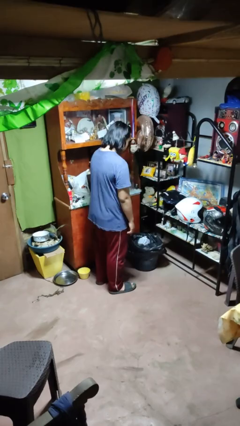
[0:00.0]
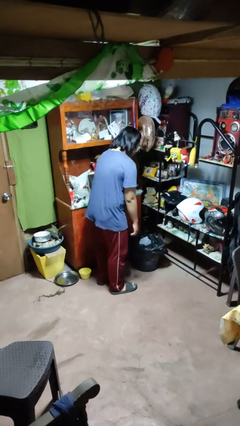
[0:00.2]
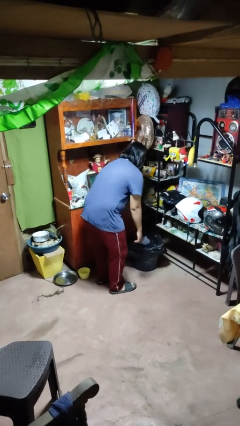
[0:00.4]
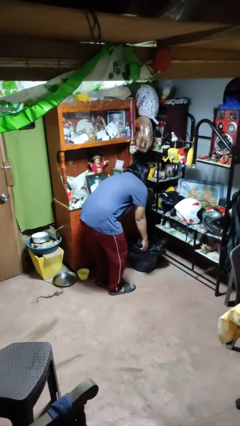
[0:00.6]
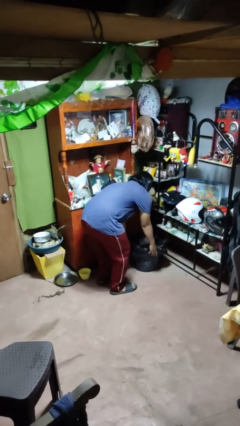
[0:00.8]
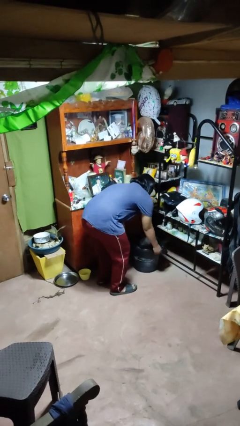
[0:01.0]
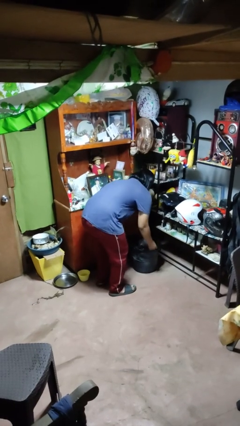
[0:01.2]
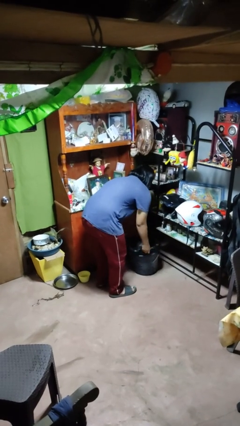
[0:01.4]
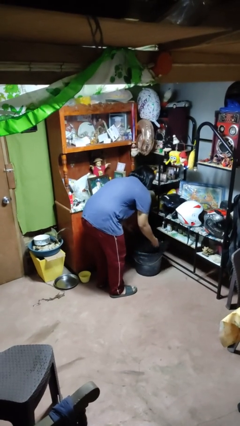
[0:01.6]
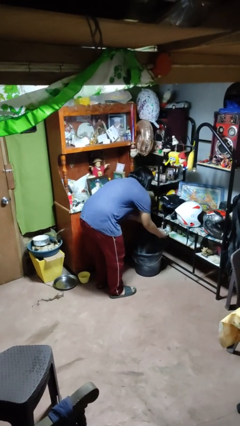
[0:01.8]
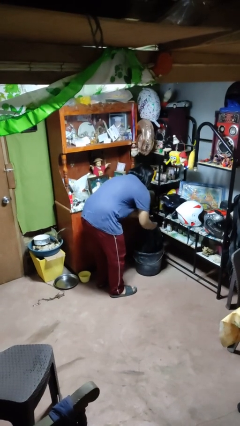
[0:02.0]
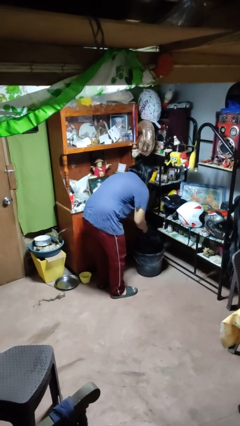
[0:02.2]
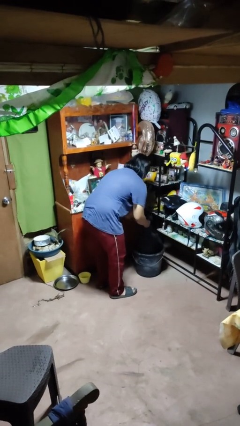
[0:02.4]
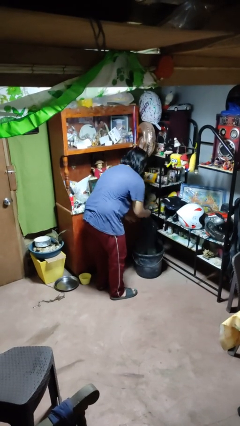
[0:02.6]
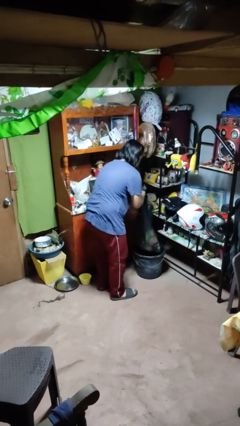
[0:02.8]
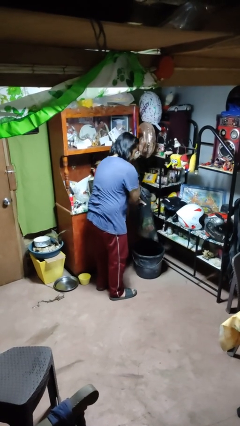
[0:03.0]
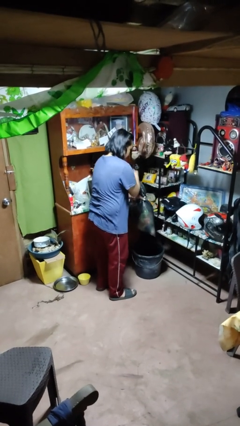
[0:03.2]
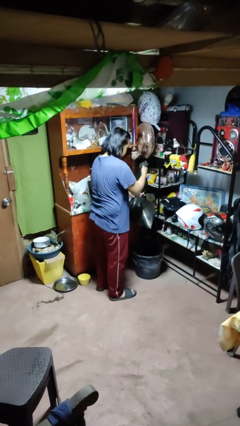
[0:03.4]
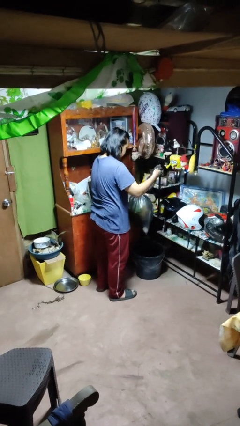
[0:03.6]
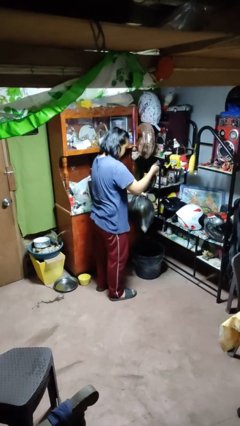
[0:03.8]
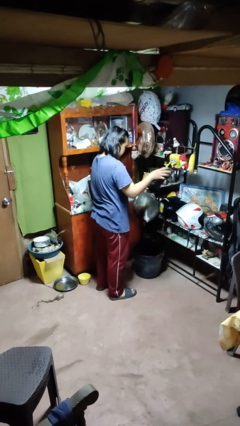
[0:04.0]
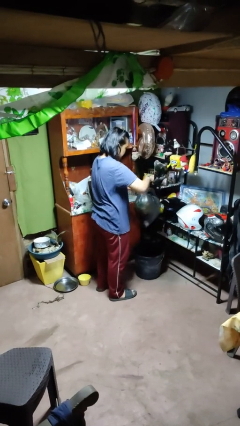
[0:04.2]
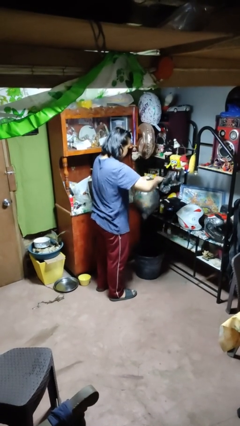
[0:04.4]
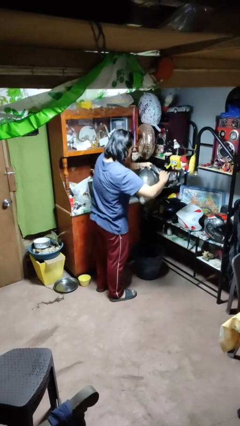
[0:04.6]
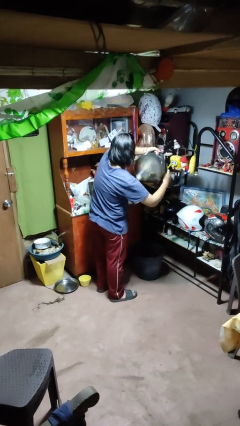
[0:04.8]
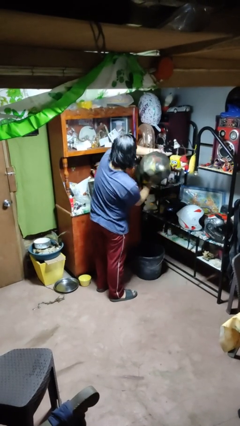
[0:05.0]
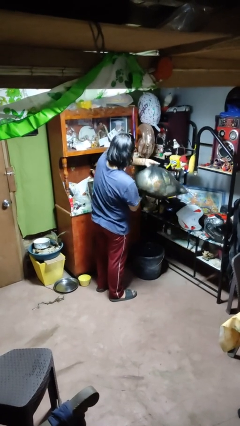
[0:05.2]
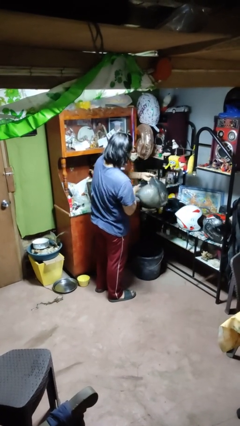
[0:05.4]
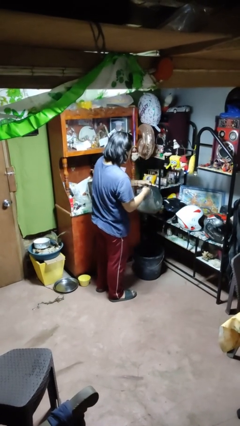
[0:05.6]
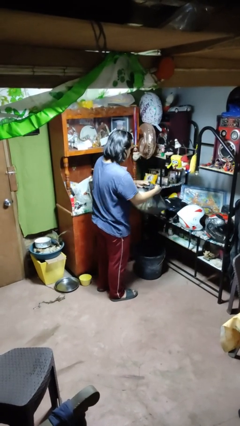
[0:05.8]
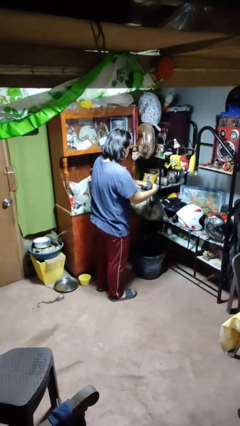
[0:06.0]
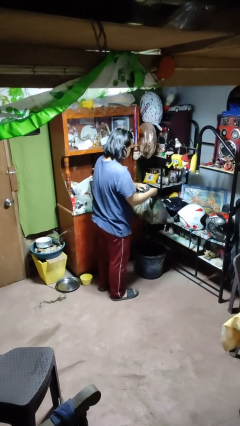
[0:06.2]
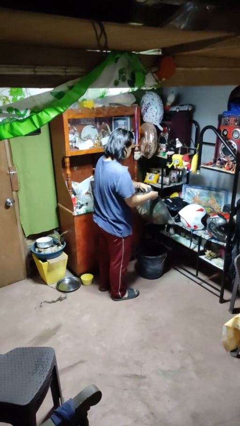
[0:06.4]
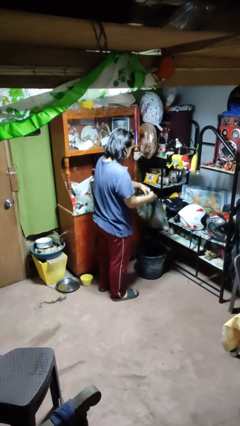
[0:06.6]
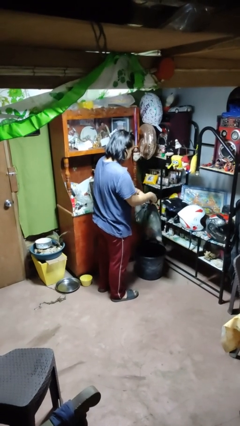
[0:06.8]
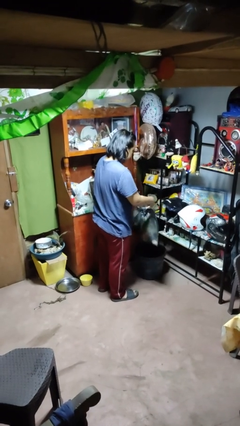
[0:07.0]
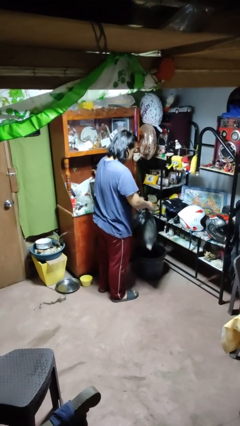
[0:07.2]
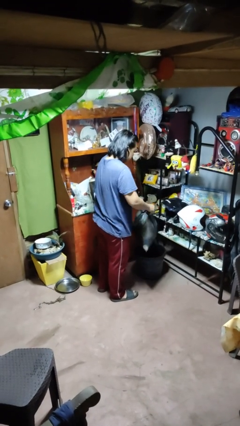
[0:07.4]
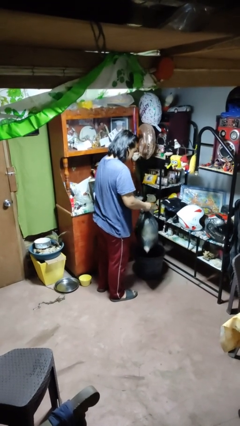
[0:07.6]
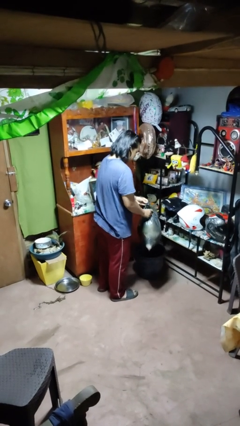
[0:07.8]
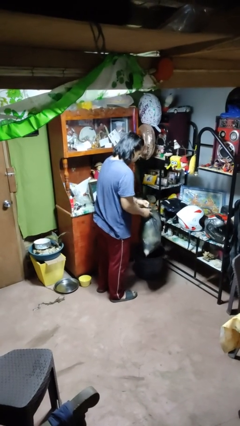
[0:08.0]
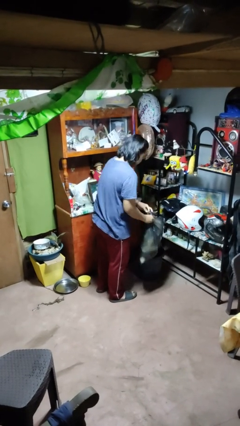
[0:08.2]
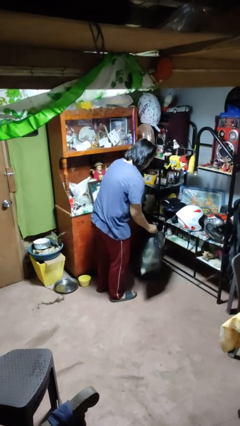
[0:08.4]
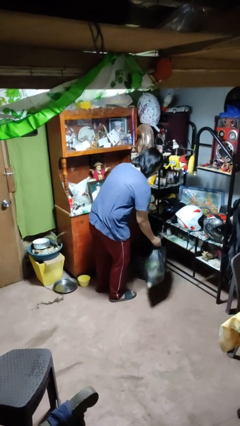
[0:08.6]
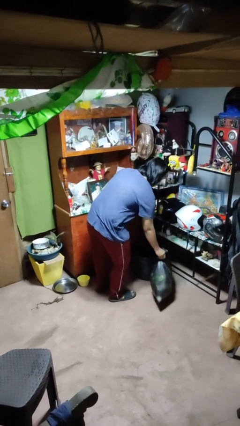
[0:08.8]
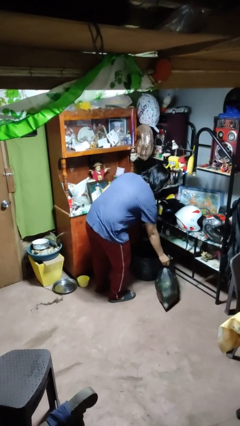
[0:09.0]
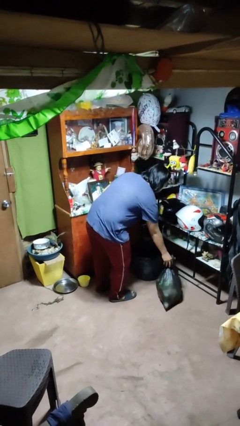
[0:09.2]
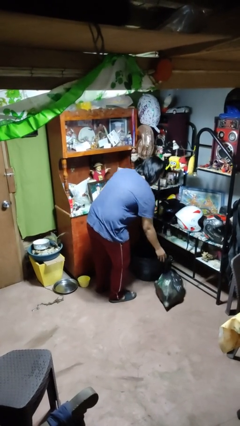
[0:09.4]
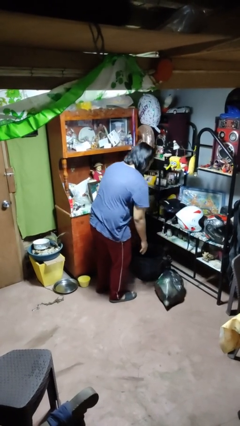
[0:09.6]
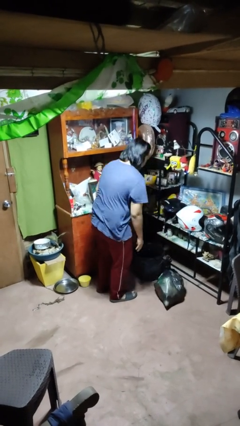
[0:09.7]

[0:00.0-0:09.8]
person removes trashbag from trashcan

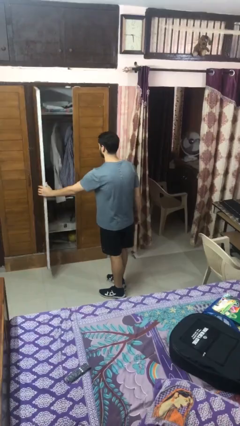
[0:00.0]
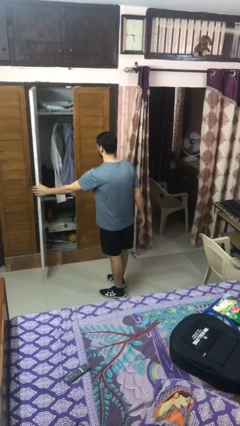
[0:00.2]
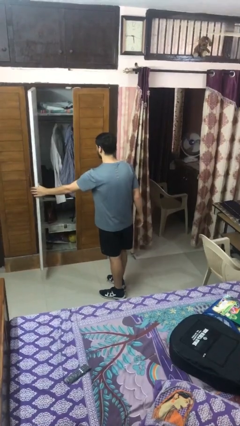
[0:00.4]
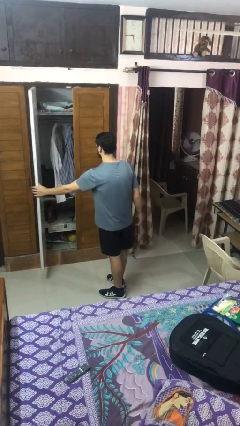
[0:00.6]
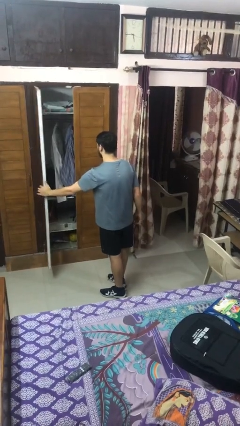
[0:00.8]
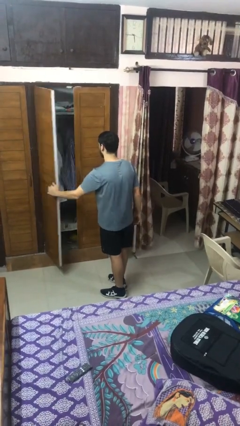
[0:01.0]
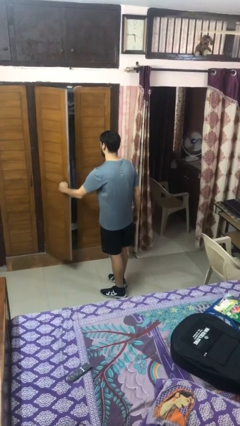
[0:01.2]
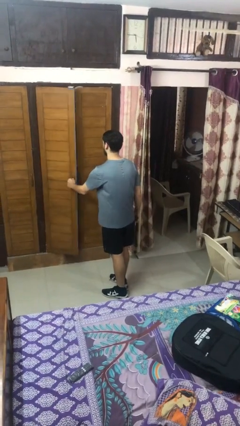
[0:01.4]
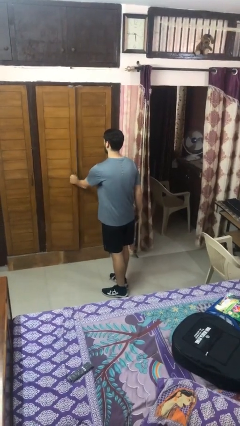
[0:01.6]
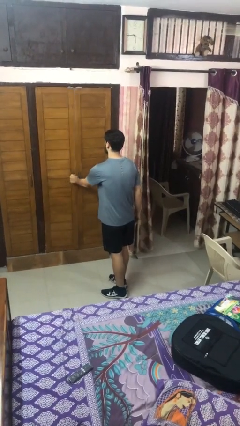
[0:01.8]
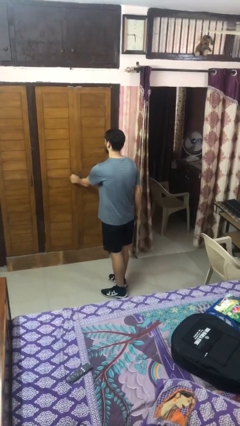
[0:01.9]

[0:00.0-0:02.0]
person closes closet door

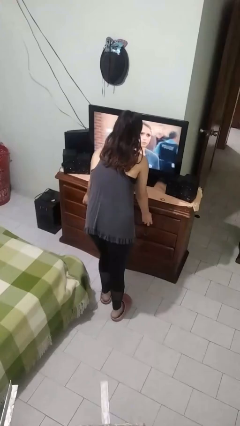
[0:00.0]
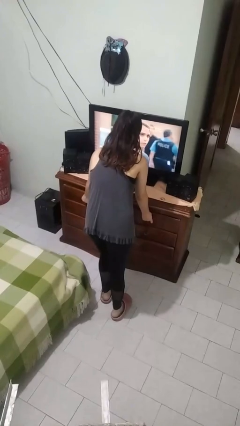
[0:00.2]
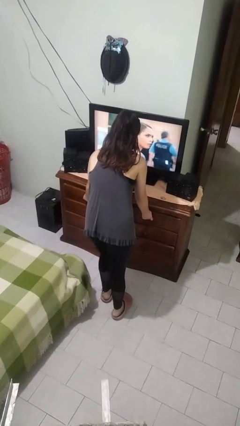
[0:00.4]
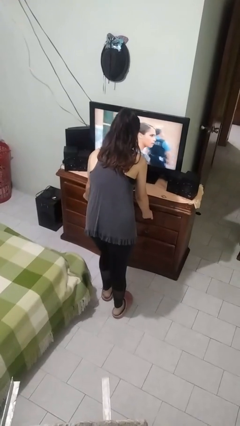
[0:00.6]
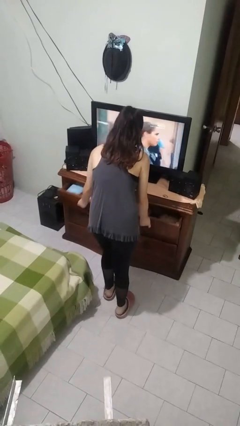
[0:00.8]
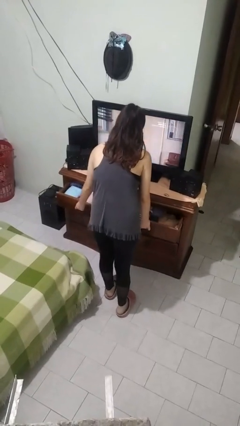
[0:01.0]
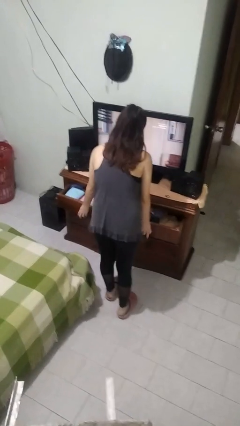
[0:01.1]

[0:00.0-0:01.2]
person opens dresser drawer

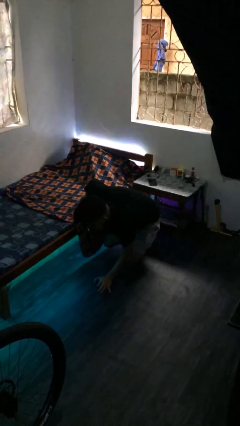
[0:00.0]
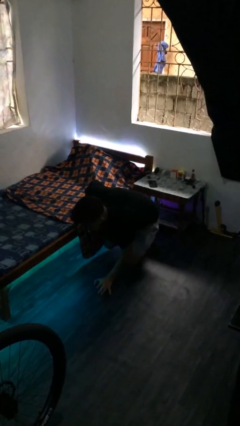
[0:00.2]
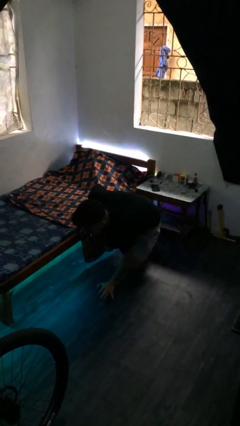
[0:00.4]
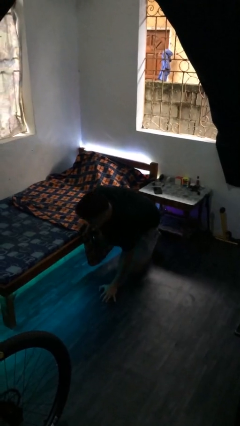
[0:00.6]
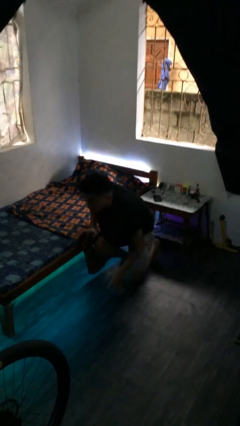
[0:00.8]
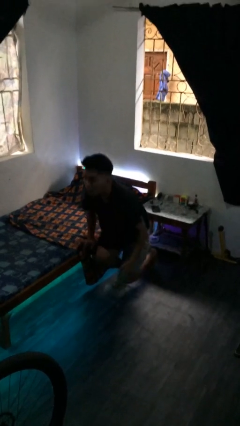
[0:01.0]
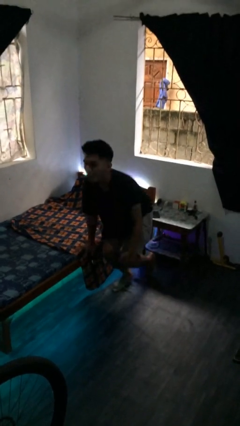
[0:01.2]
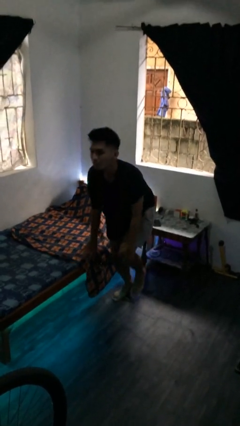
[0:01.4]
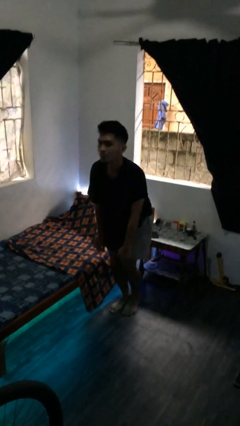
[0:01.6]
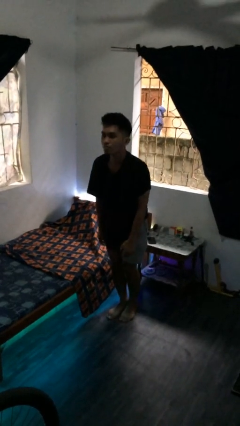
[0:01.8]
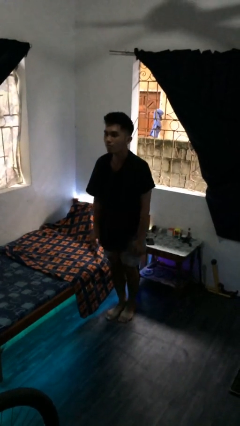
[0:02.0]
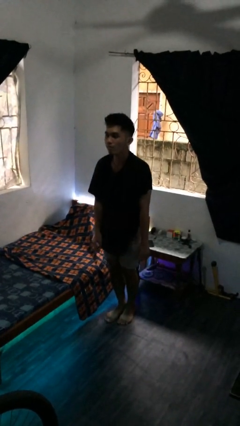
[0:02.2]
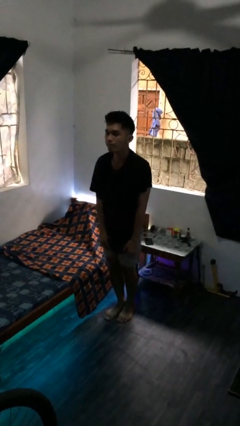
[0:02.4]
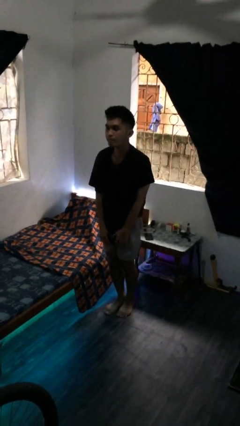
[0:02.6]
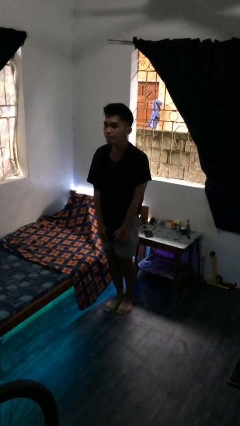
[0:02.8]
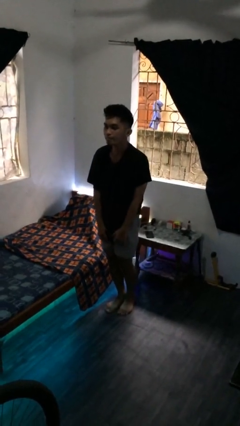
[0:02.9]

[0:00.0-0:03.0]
person stands up from floor

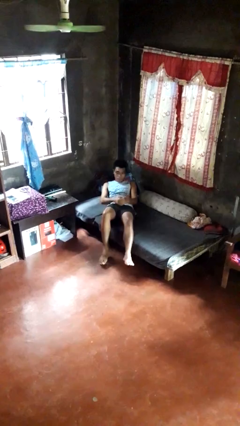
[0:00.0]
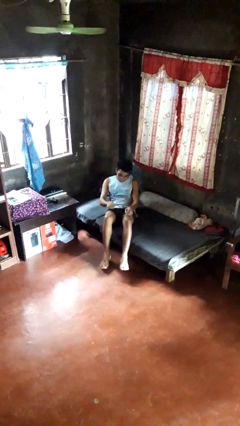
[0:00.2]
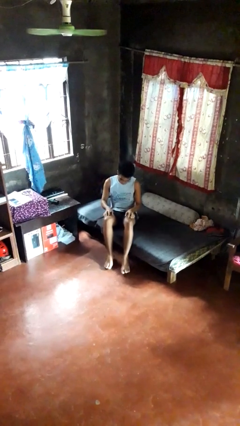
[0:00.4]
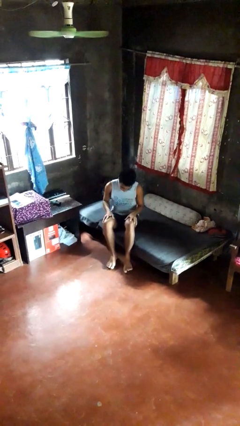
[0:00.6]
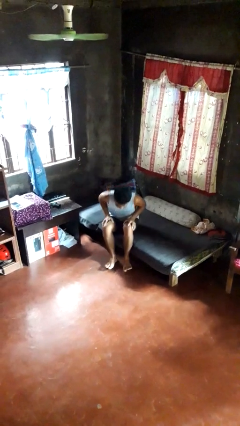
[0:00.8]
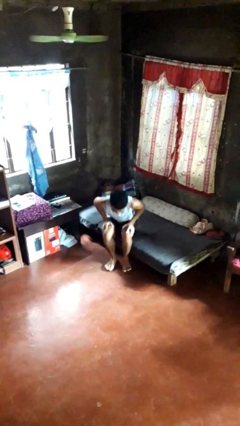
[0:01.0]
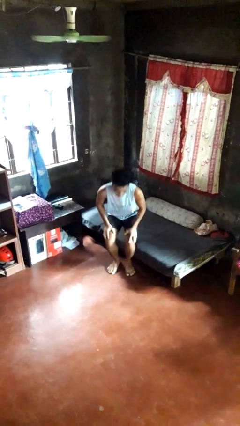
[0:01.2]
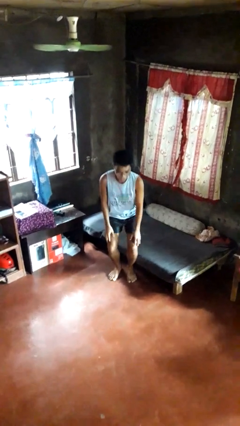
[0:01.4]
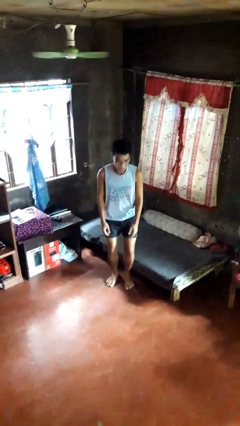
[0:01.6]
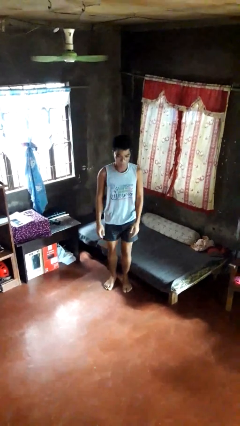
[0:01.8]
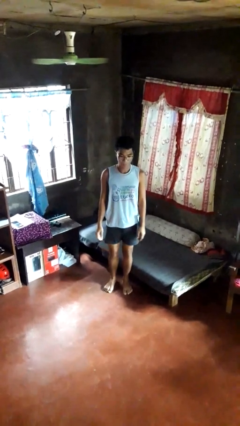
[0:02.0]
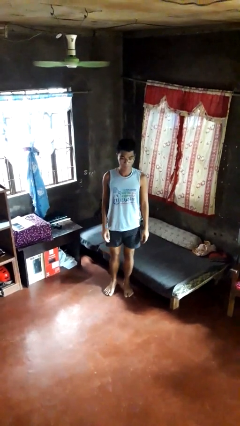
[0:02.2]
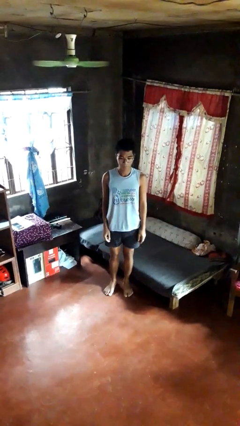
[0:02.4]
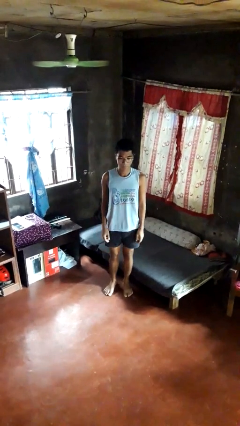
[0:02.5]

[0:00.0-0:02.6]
person stands up
